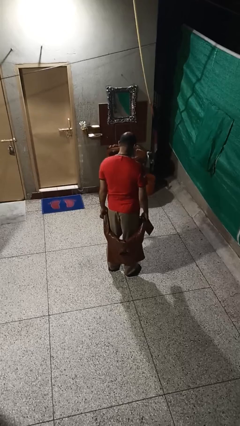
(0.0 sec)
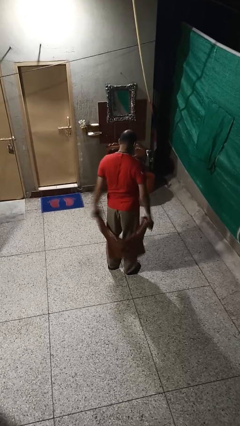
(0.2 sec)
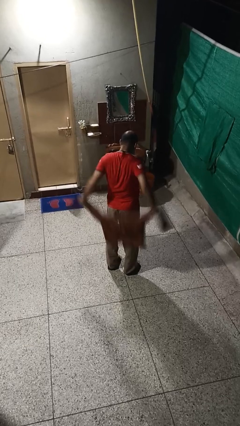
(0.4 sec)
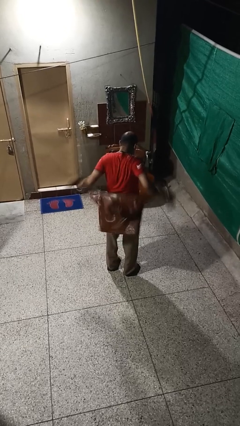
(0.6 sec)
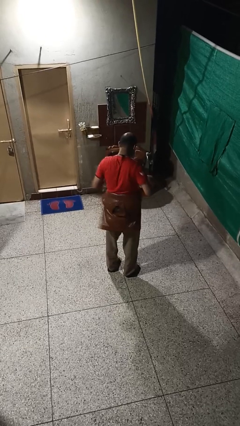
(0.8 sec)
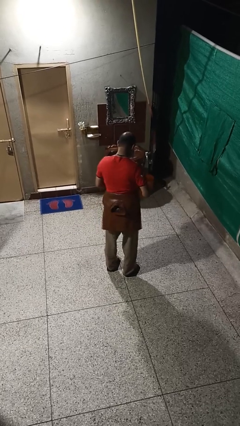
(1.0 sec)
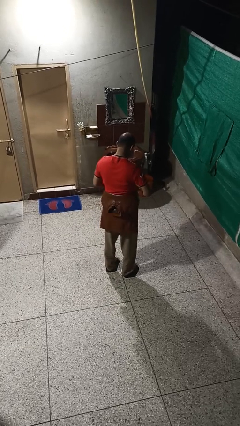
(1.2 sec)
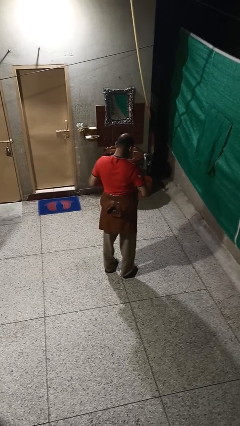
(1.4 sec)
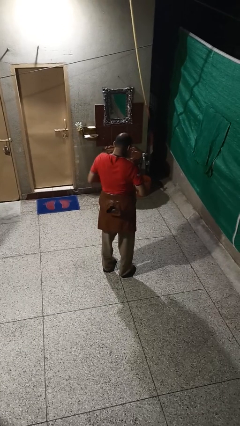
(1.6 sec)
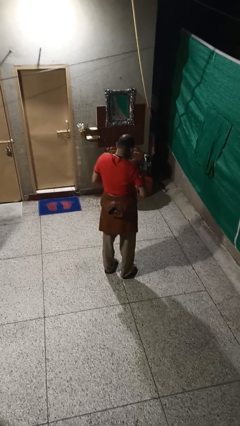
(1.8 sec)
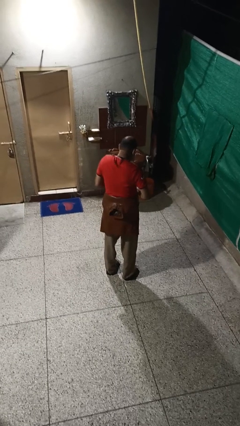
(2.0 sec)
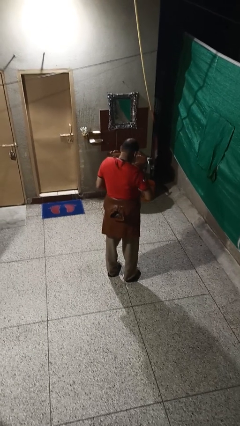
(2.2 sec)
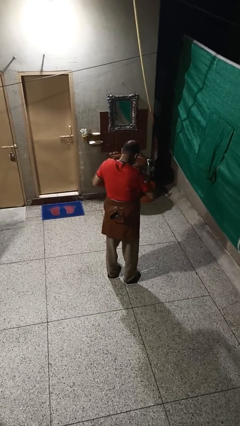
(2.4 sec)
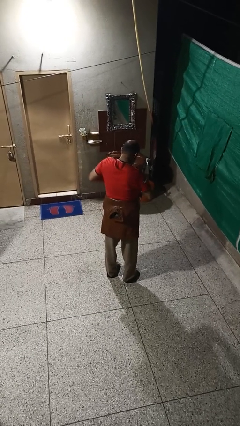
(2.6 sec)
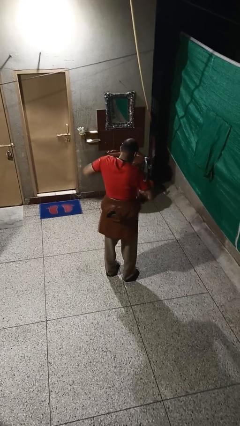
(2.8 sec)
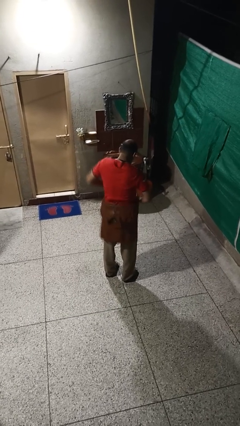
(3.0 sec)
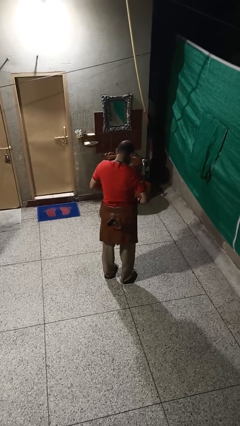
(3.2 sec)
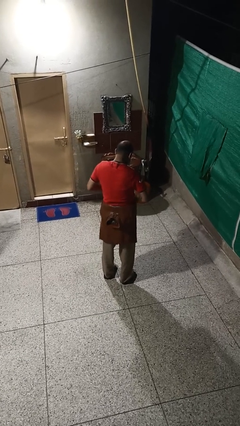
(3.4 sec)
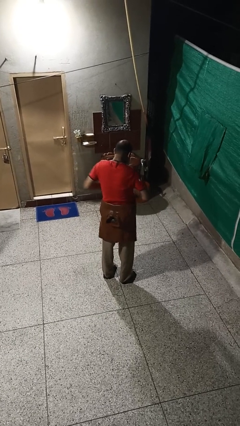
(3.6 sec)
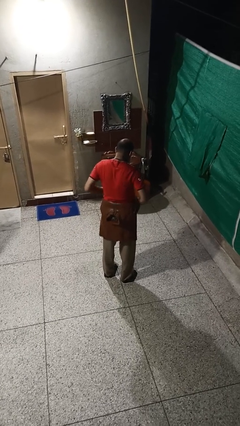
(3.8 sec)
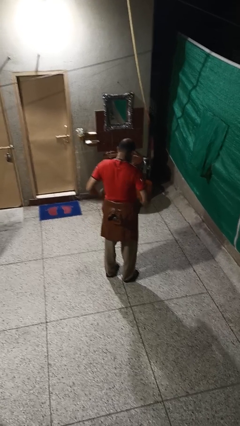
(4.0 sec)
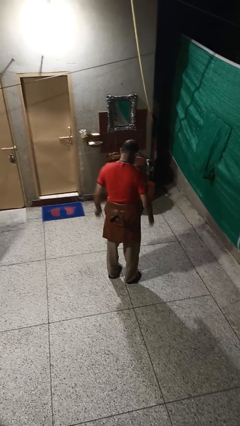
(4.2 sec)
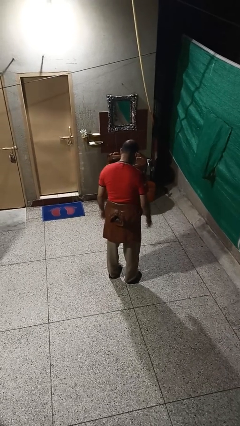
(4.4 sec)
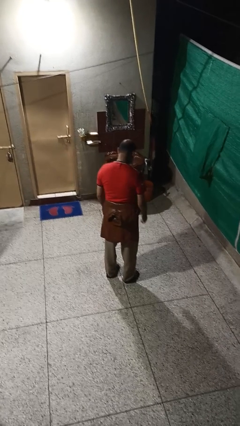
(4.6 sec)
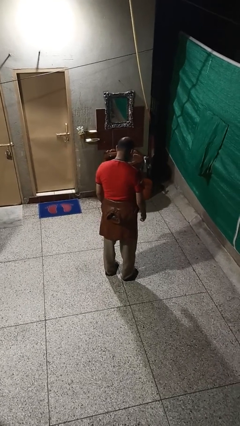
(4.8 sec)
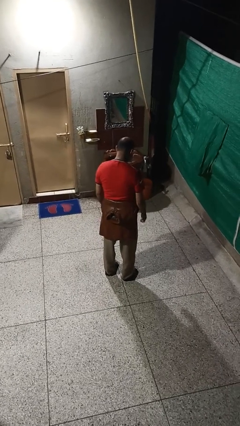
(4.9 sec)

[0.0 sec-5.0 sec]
person ties jacket around waist

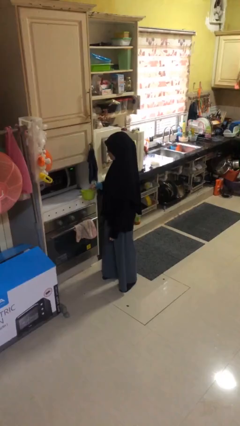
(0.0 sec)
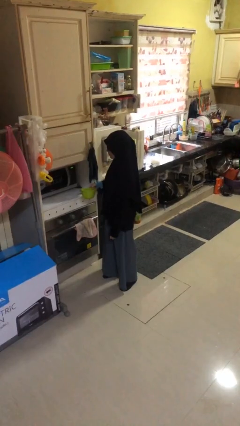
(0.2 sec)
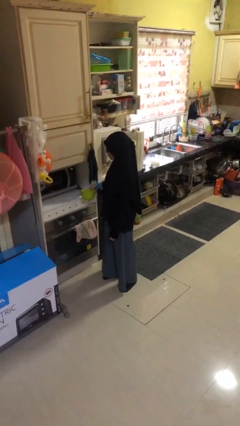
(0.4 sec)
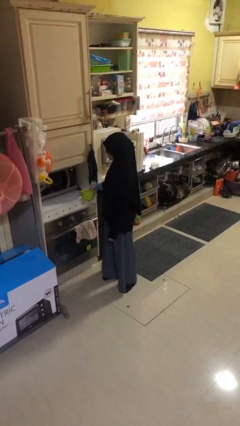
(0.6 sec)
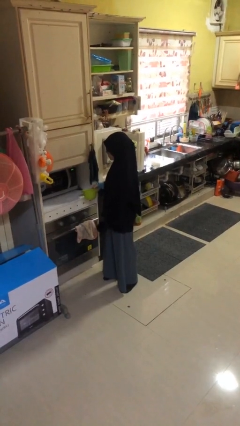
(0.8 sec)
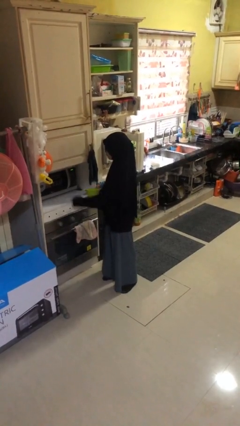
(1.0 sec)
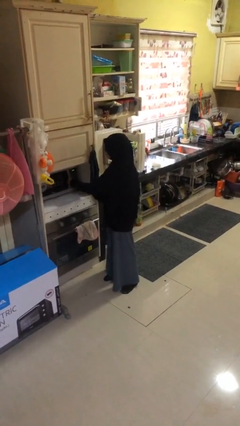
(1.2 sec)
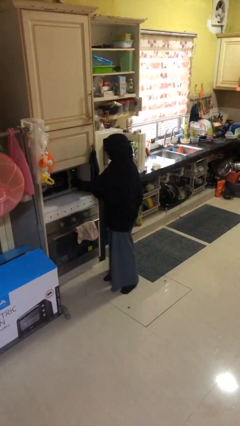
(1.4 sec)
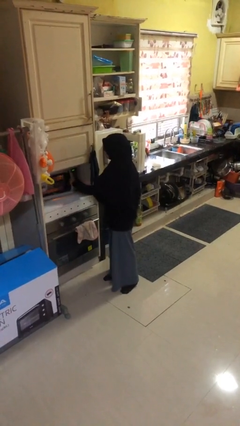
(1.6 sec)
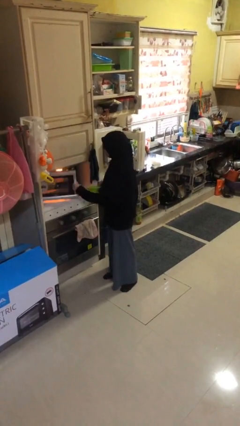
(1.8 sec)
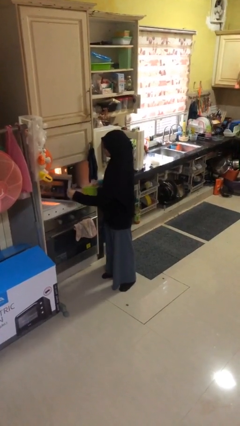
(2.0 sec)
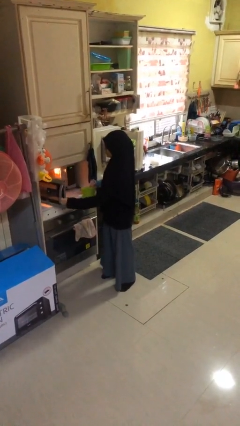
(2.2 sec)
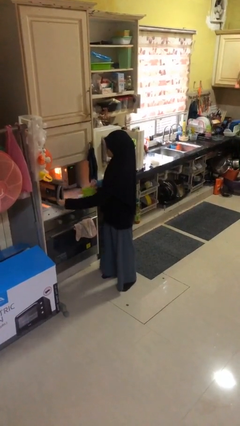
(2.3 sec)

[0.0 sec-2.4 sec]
person opens microwave

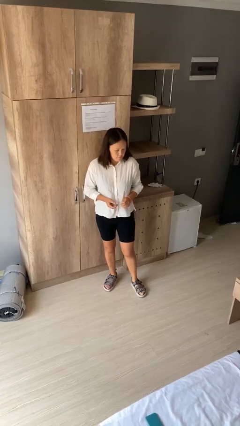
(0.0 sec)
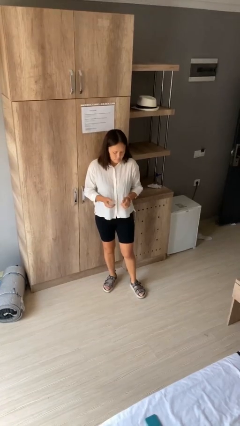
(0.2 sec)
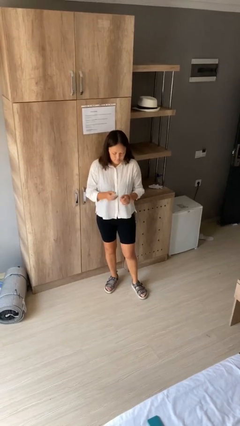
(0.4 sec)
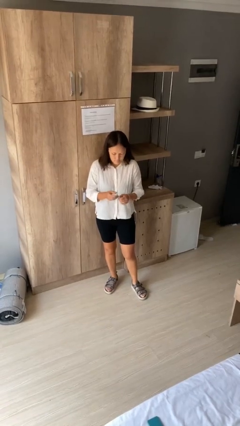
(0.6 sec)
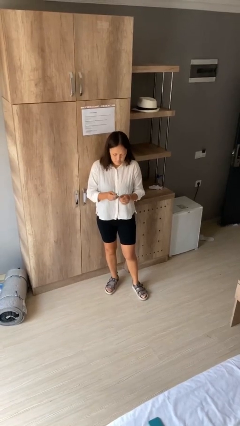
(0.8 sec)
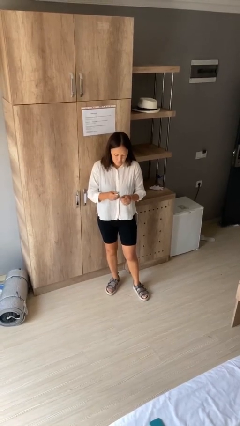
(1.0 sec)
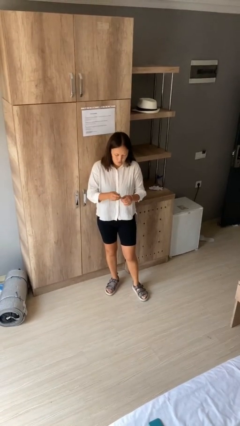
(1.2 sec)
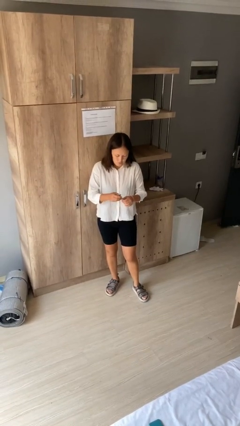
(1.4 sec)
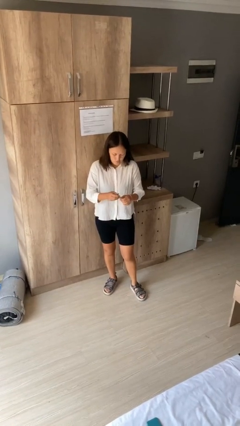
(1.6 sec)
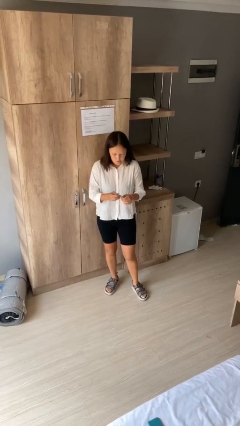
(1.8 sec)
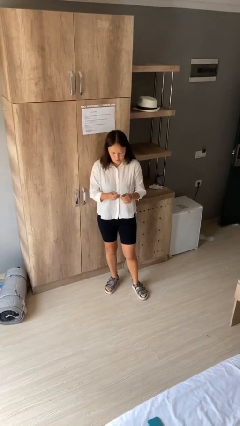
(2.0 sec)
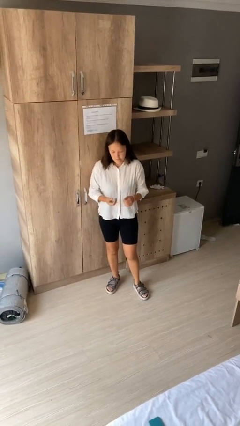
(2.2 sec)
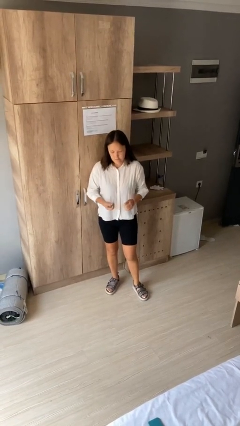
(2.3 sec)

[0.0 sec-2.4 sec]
person clips fingernails

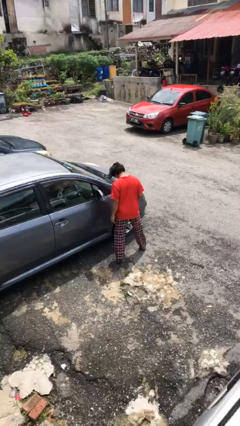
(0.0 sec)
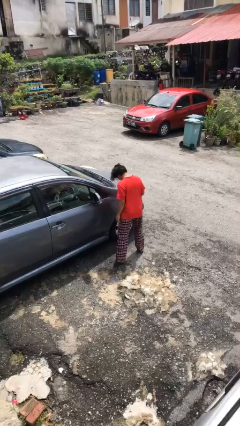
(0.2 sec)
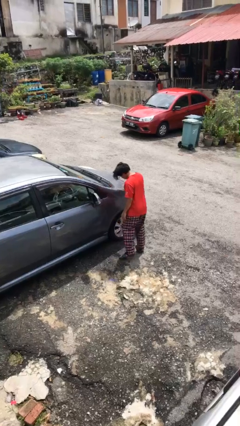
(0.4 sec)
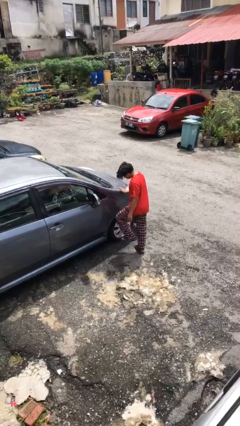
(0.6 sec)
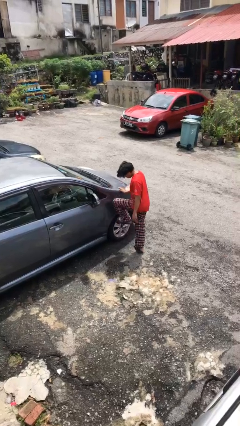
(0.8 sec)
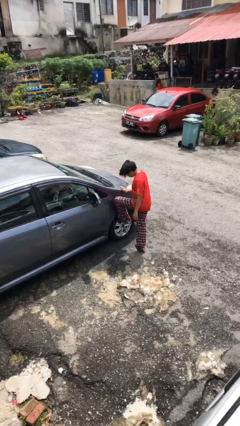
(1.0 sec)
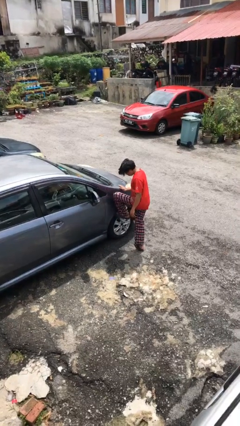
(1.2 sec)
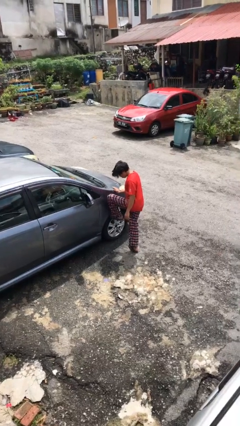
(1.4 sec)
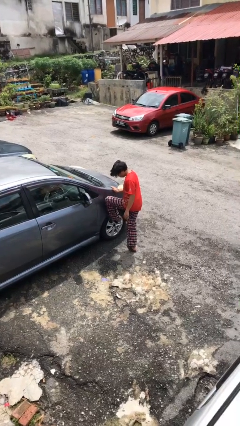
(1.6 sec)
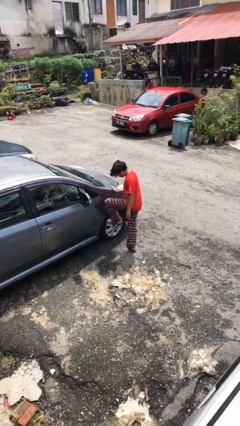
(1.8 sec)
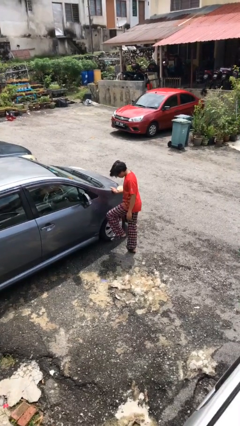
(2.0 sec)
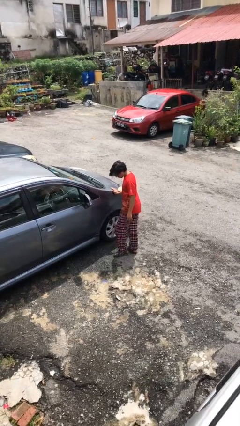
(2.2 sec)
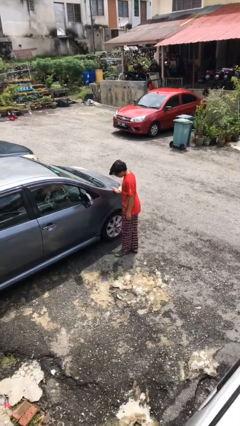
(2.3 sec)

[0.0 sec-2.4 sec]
person kicks car tires

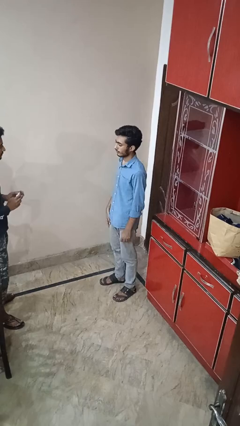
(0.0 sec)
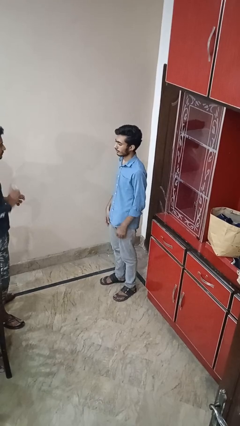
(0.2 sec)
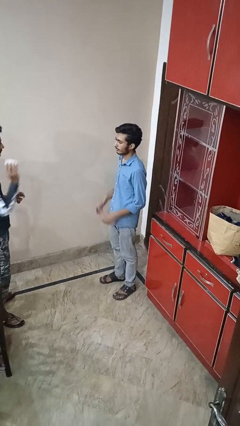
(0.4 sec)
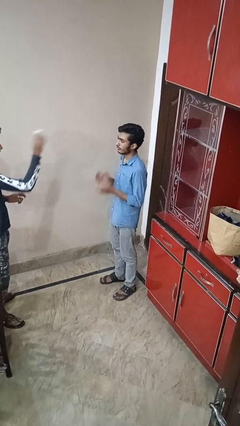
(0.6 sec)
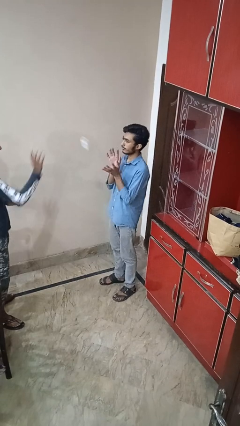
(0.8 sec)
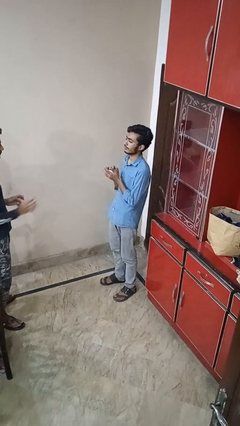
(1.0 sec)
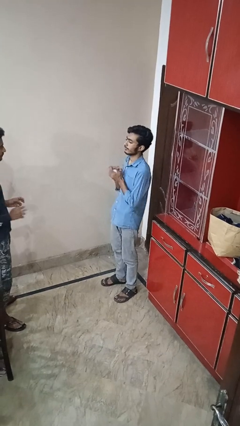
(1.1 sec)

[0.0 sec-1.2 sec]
person catches object from person

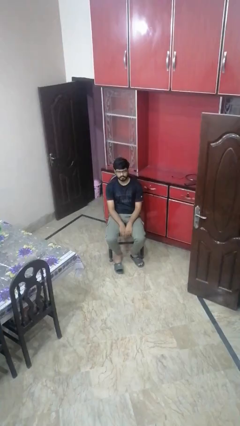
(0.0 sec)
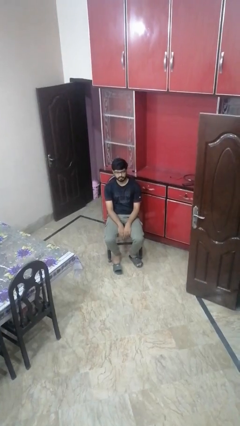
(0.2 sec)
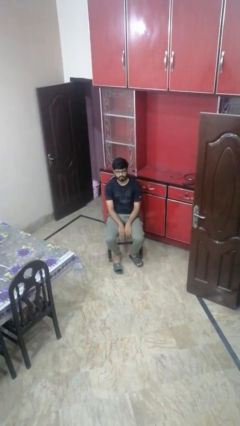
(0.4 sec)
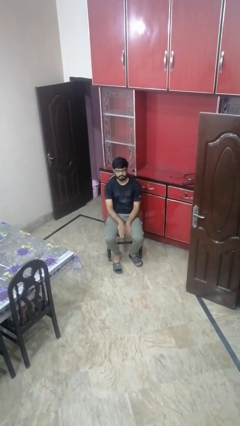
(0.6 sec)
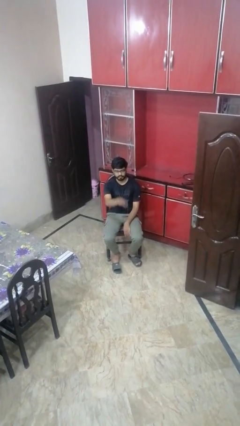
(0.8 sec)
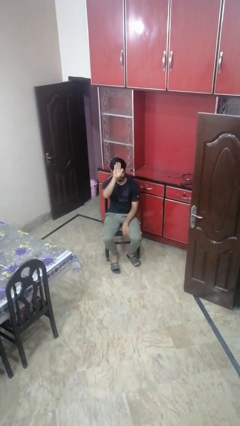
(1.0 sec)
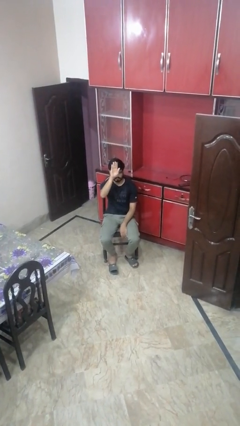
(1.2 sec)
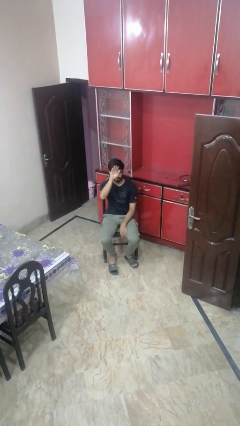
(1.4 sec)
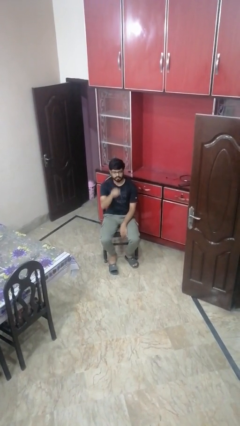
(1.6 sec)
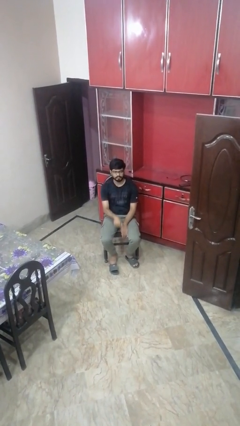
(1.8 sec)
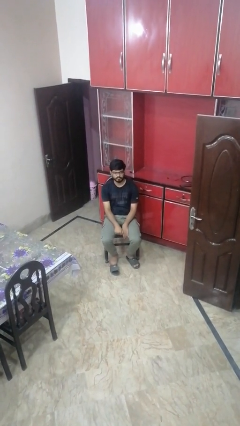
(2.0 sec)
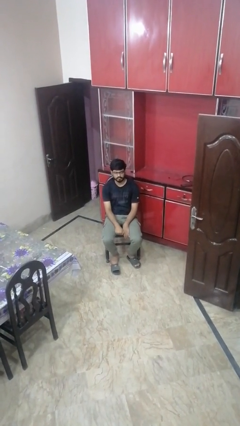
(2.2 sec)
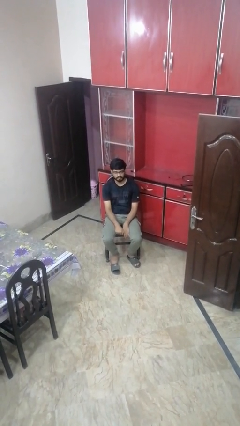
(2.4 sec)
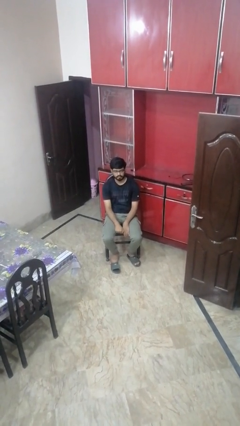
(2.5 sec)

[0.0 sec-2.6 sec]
person gestures swipe up

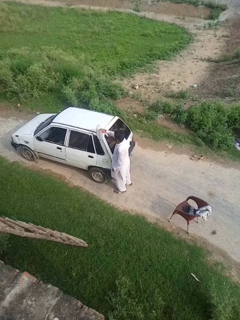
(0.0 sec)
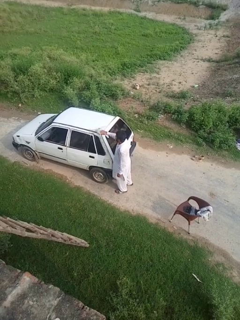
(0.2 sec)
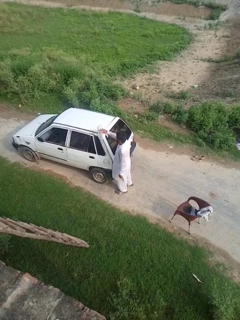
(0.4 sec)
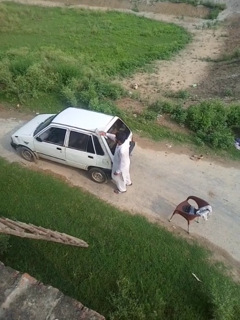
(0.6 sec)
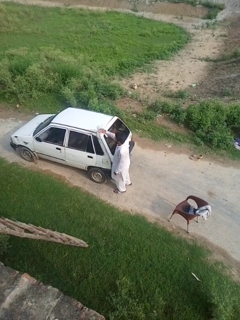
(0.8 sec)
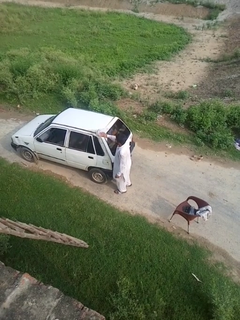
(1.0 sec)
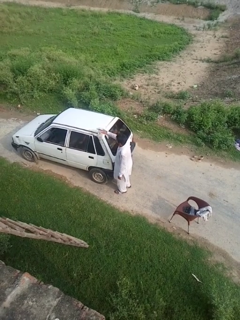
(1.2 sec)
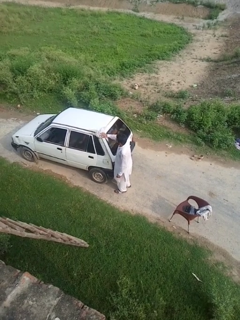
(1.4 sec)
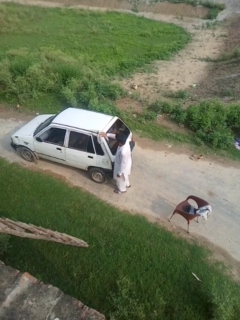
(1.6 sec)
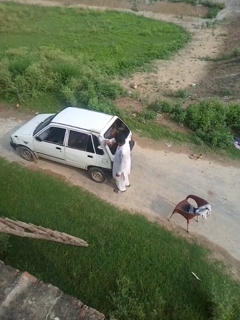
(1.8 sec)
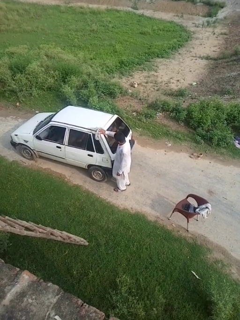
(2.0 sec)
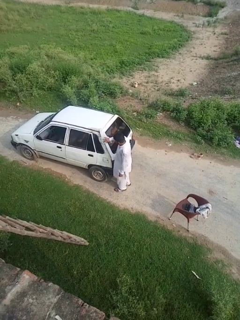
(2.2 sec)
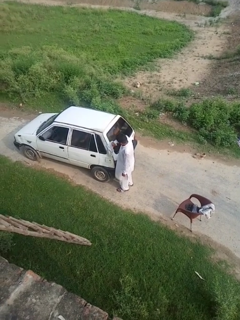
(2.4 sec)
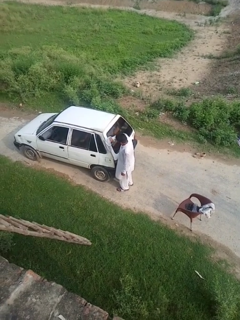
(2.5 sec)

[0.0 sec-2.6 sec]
person polishes car with rag
